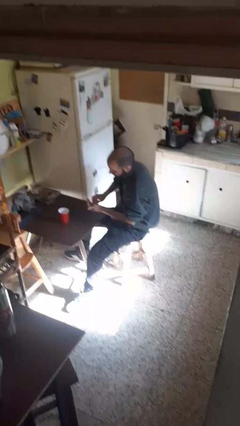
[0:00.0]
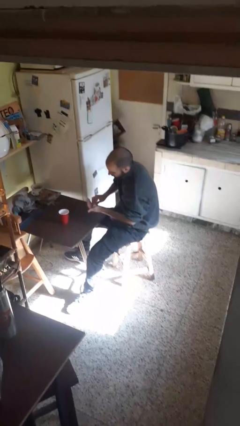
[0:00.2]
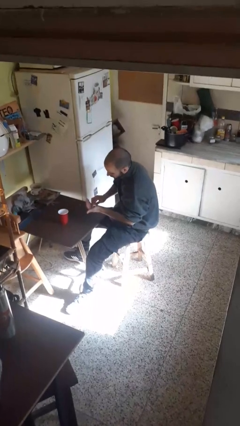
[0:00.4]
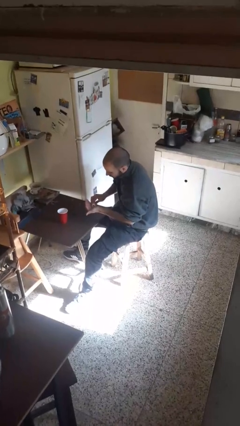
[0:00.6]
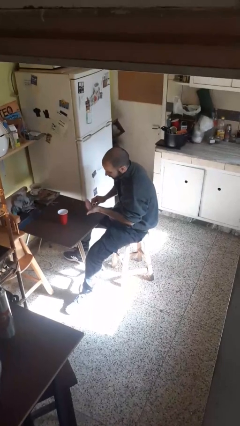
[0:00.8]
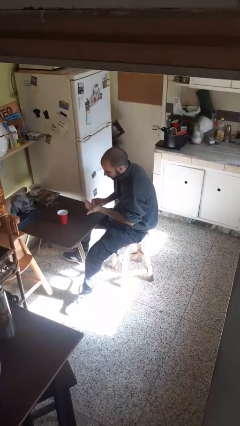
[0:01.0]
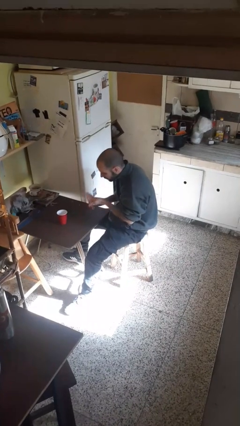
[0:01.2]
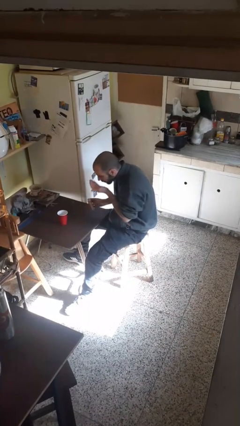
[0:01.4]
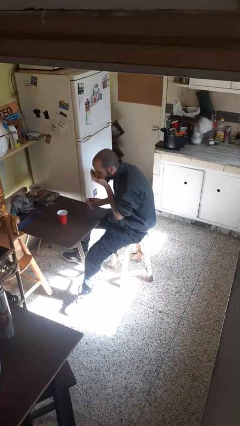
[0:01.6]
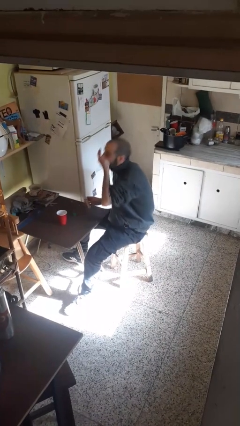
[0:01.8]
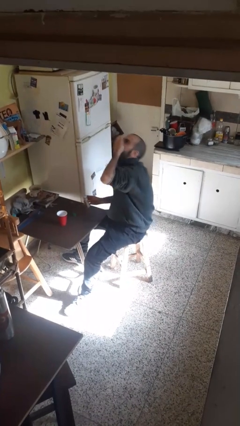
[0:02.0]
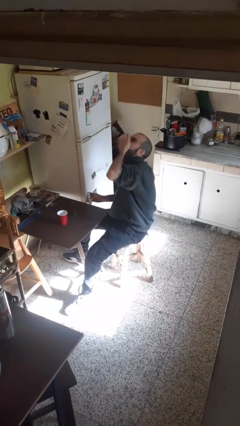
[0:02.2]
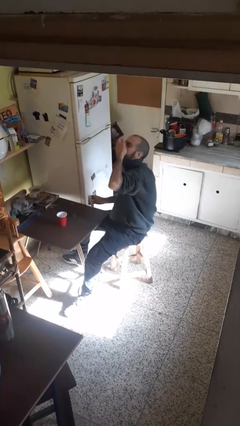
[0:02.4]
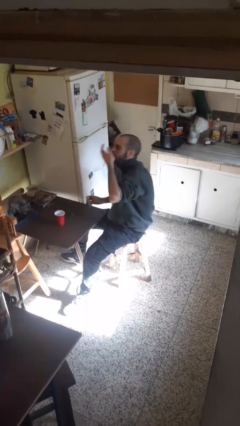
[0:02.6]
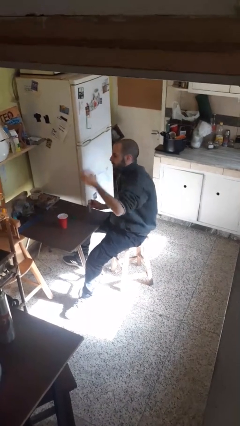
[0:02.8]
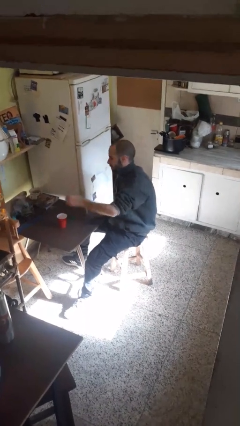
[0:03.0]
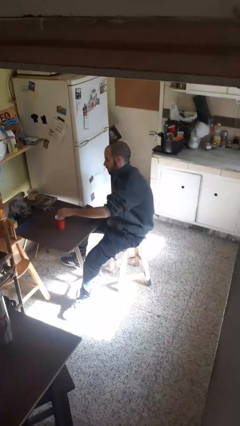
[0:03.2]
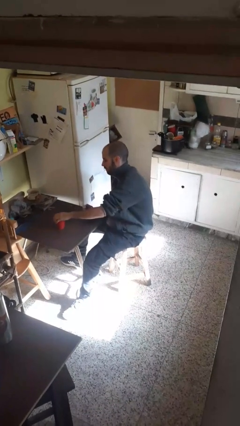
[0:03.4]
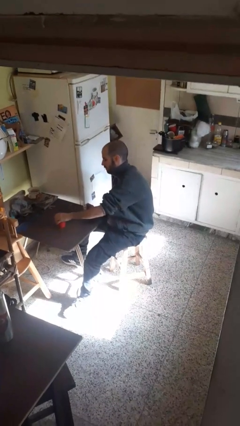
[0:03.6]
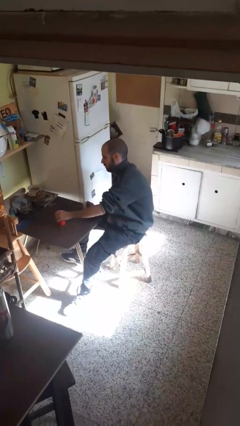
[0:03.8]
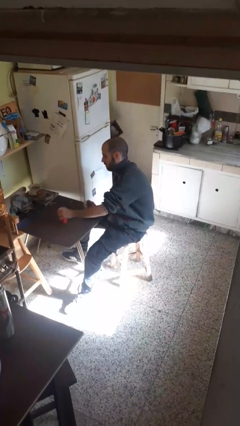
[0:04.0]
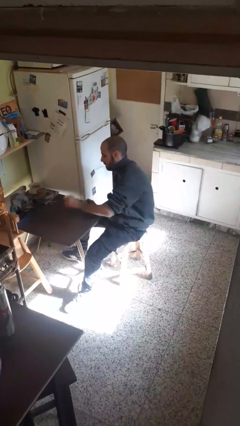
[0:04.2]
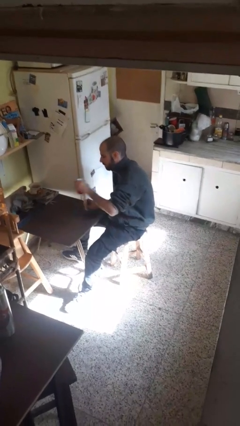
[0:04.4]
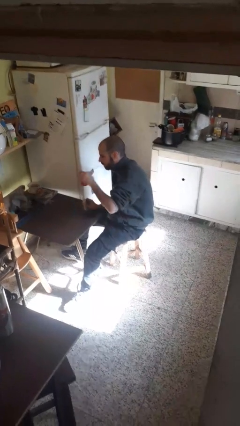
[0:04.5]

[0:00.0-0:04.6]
person takes medicine pills

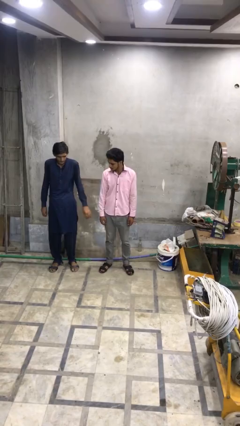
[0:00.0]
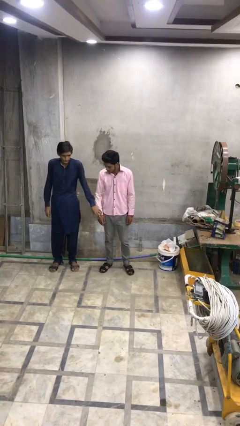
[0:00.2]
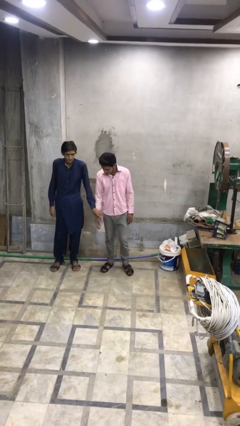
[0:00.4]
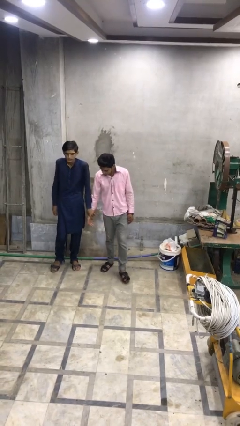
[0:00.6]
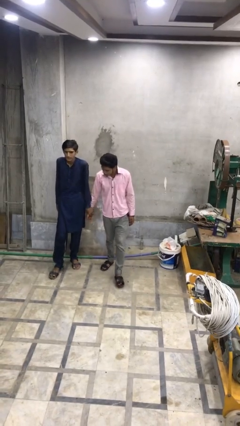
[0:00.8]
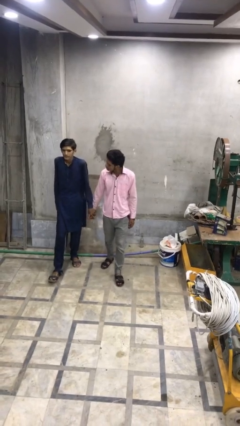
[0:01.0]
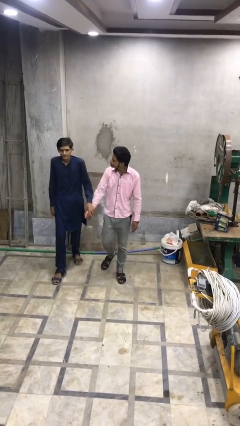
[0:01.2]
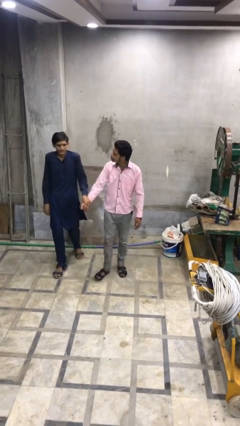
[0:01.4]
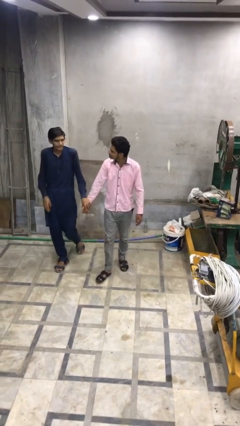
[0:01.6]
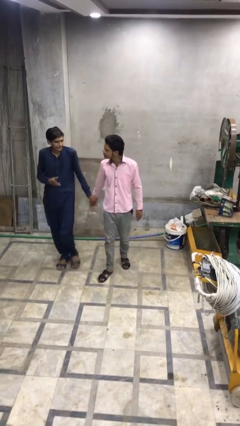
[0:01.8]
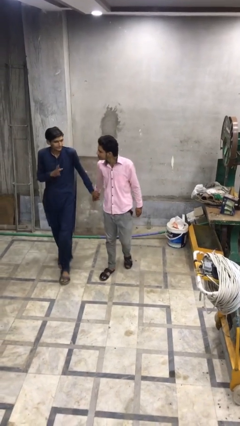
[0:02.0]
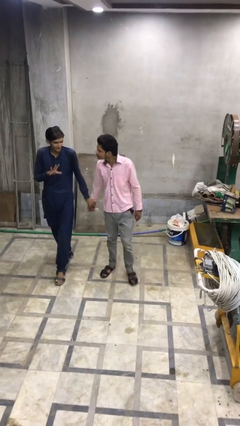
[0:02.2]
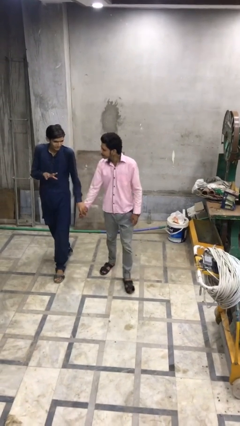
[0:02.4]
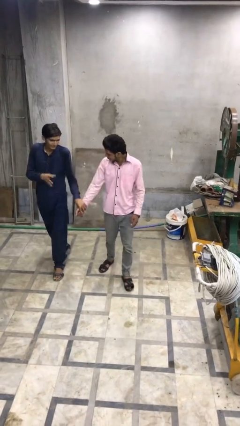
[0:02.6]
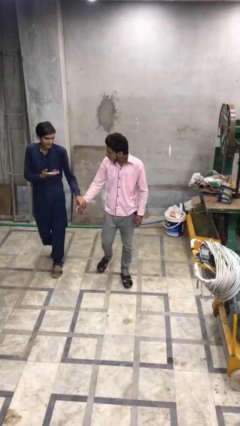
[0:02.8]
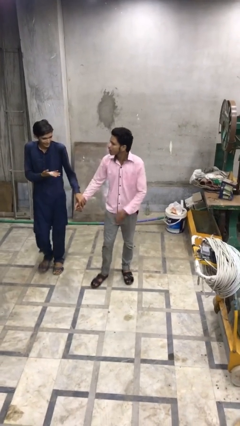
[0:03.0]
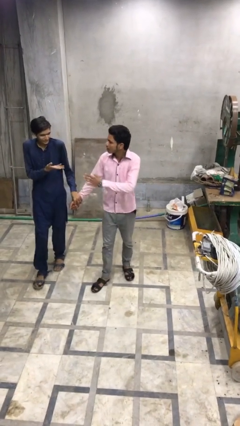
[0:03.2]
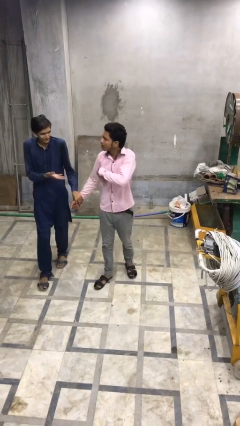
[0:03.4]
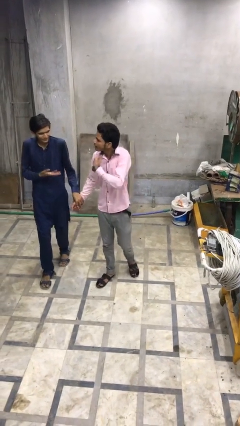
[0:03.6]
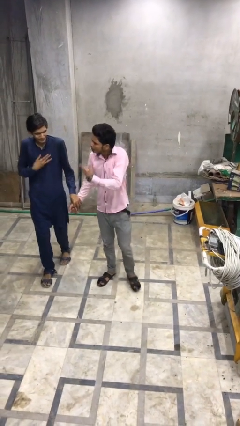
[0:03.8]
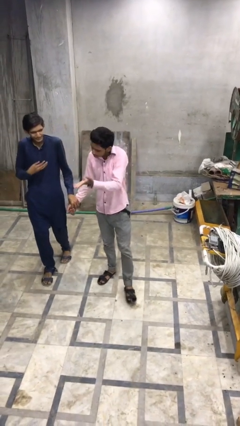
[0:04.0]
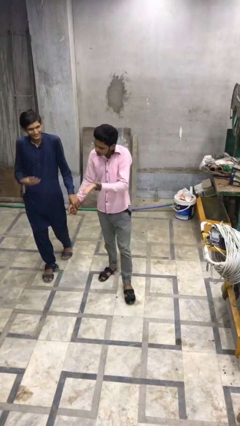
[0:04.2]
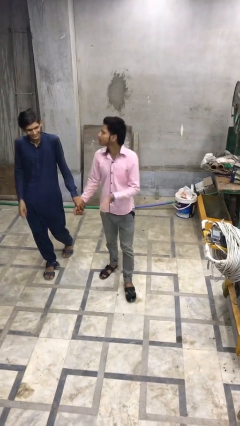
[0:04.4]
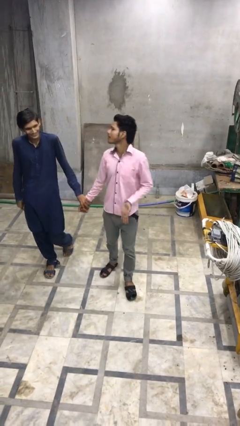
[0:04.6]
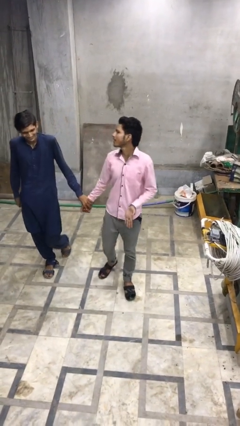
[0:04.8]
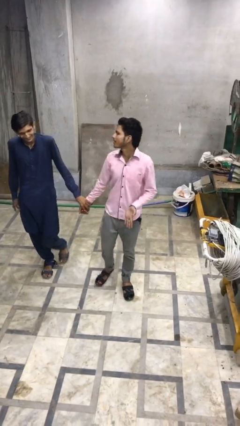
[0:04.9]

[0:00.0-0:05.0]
person holds hand

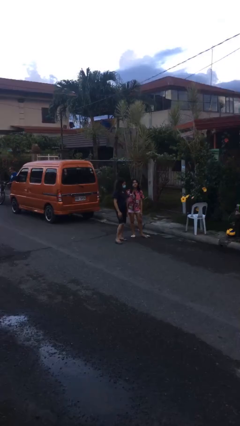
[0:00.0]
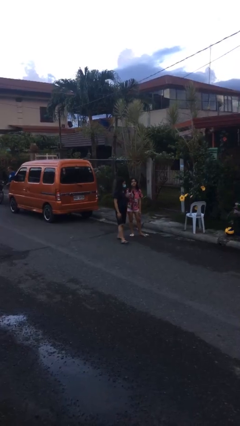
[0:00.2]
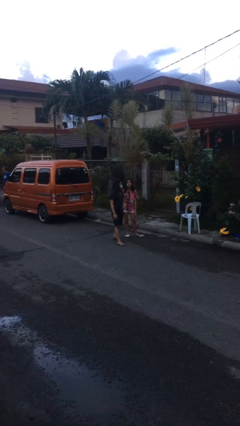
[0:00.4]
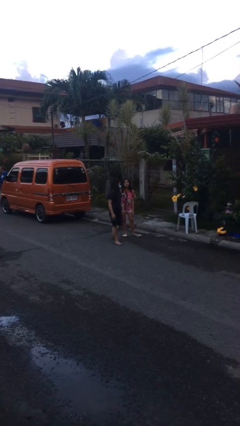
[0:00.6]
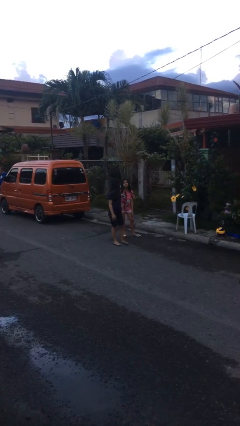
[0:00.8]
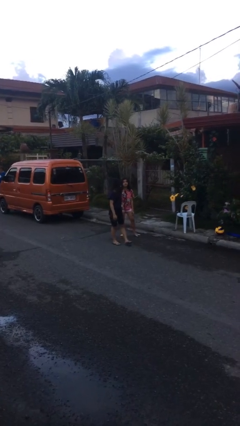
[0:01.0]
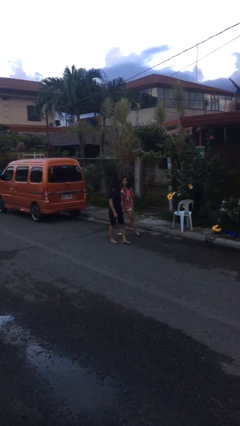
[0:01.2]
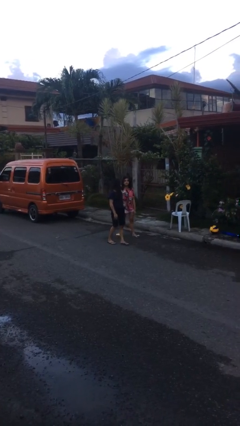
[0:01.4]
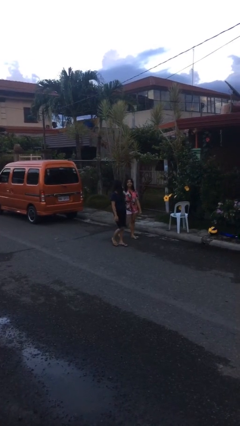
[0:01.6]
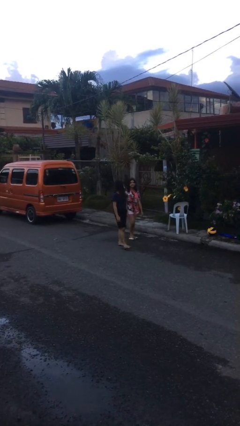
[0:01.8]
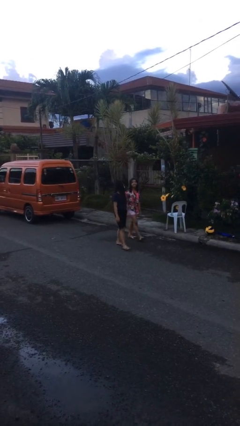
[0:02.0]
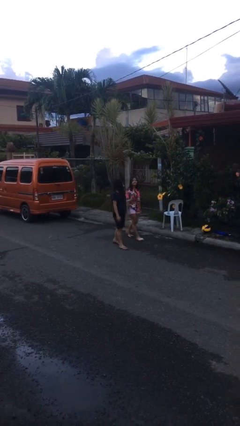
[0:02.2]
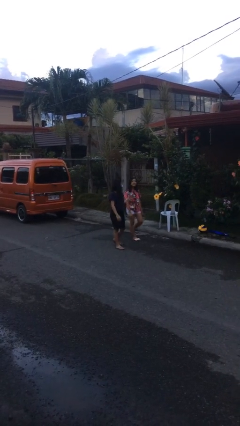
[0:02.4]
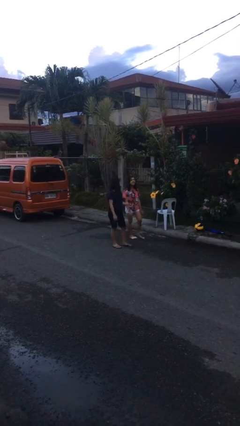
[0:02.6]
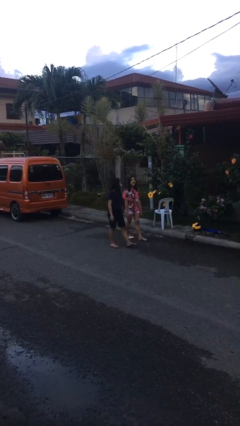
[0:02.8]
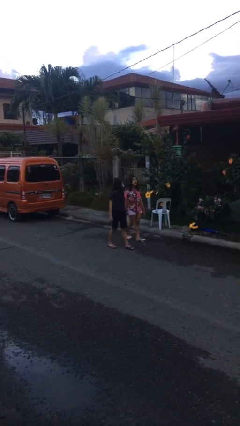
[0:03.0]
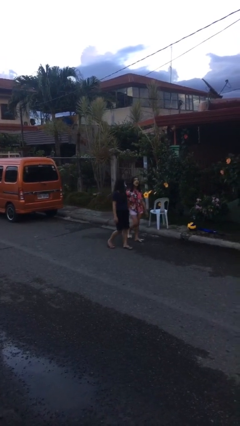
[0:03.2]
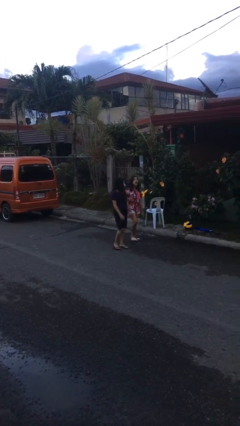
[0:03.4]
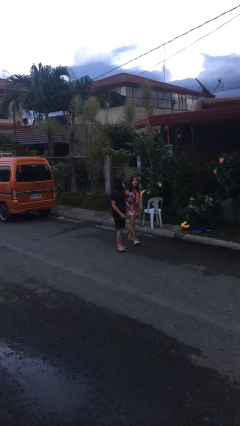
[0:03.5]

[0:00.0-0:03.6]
person talks to person

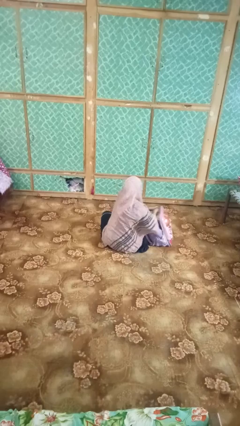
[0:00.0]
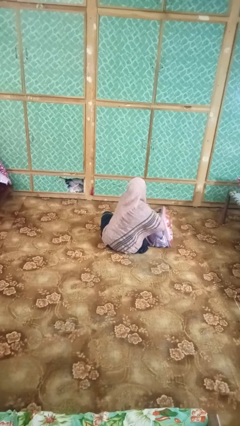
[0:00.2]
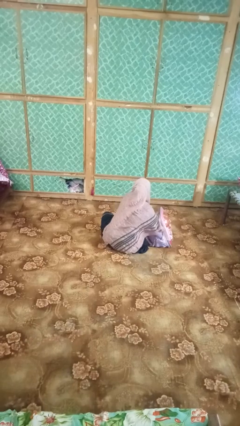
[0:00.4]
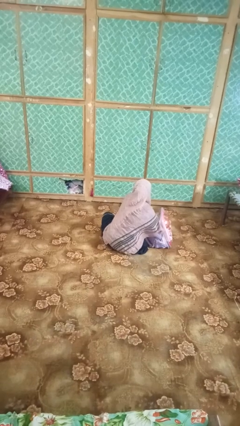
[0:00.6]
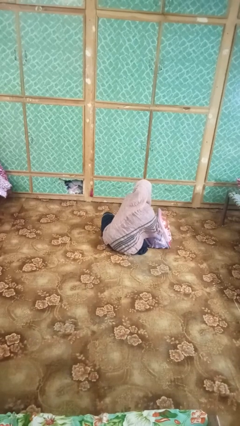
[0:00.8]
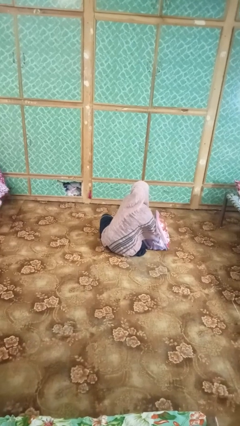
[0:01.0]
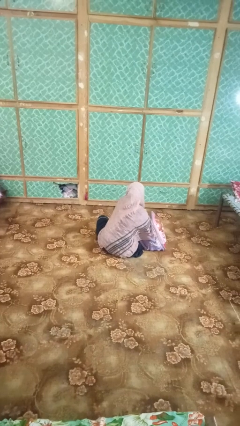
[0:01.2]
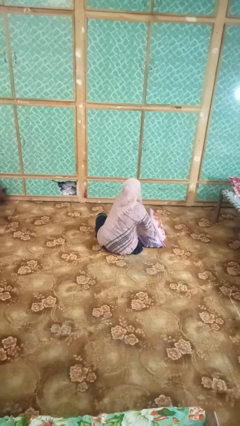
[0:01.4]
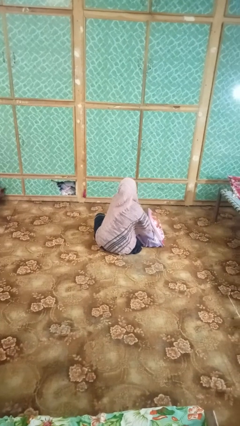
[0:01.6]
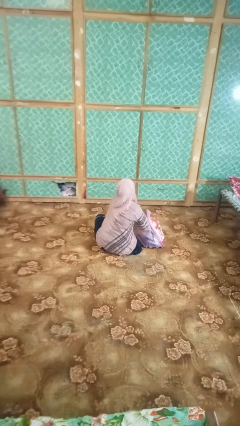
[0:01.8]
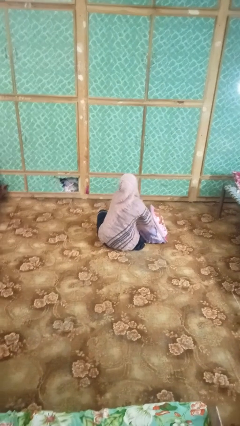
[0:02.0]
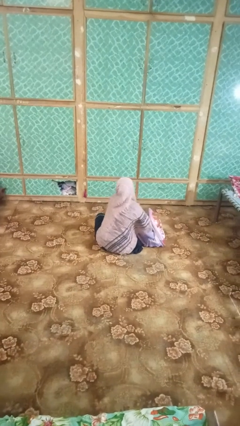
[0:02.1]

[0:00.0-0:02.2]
person searches in bag

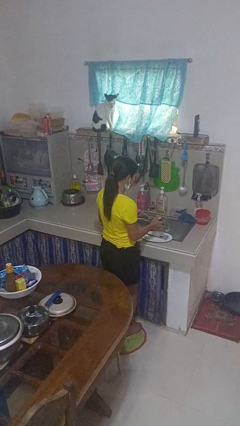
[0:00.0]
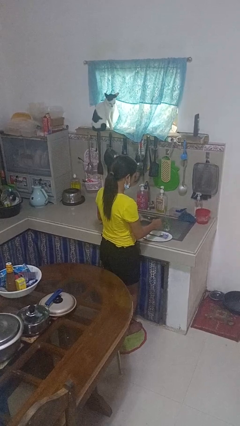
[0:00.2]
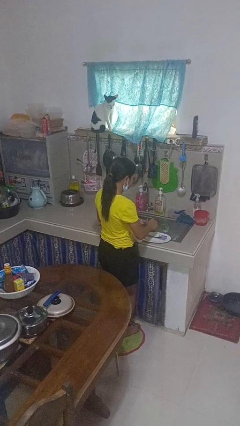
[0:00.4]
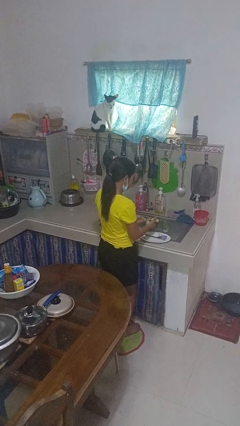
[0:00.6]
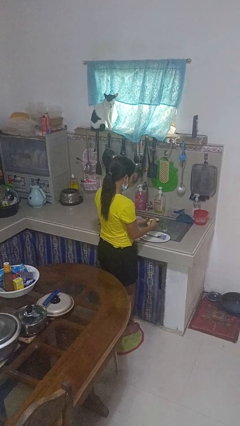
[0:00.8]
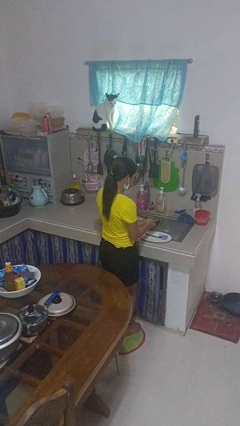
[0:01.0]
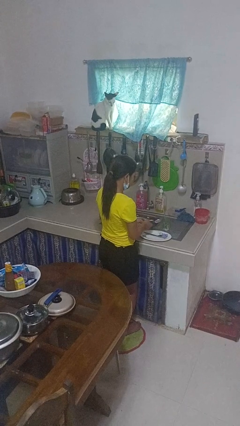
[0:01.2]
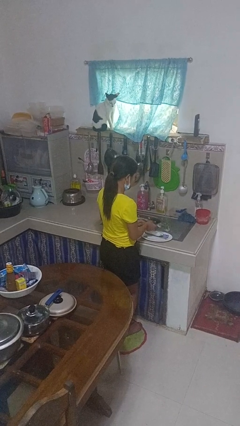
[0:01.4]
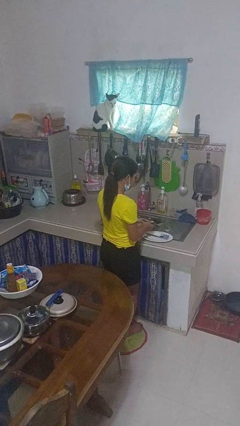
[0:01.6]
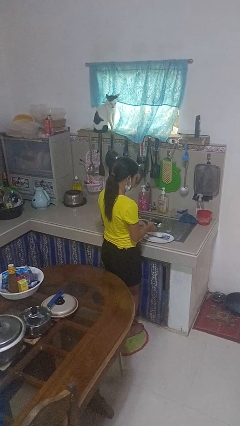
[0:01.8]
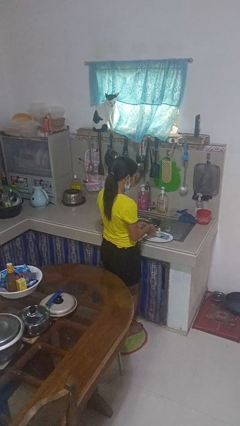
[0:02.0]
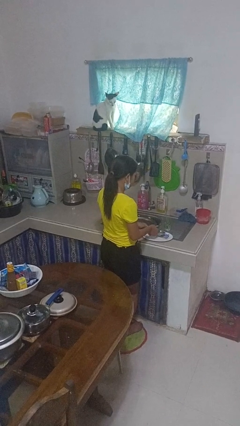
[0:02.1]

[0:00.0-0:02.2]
person washes dish
